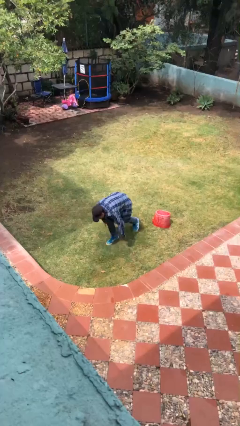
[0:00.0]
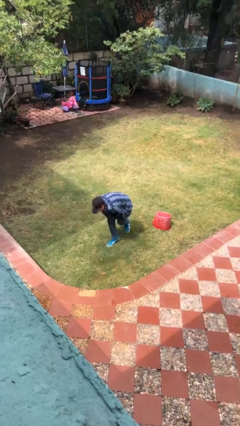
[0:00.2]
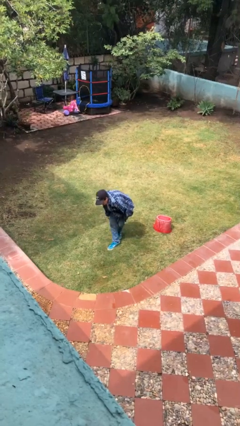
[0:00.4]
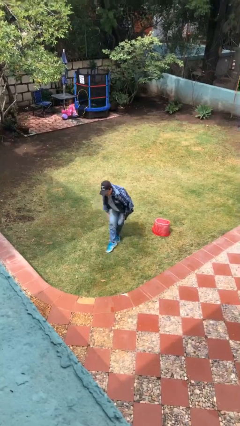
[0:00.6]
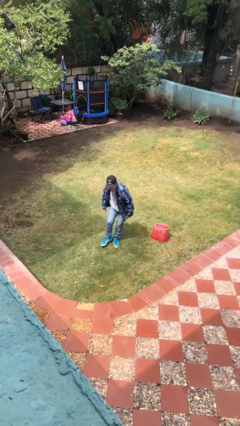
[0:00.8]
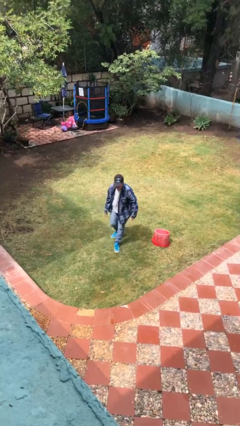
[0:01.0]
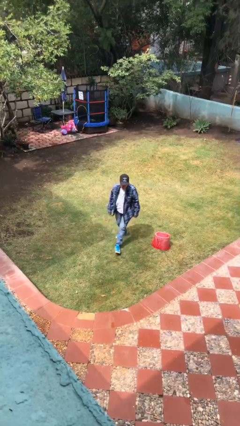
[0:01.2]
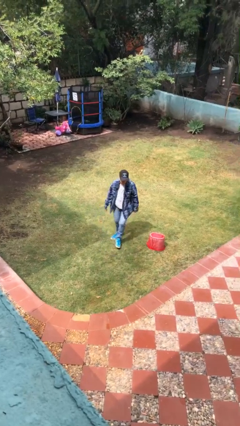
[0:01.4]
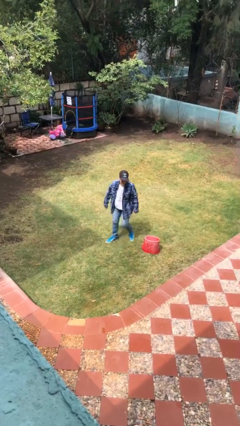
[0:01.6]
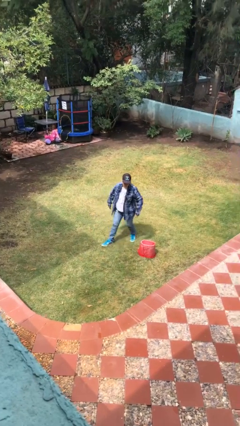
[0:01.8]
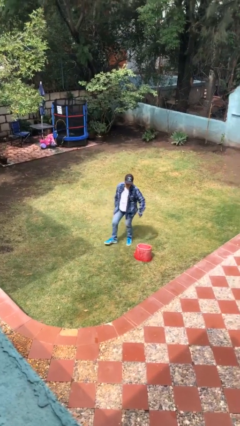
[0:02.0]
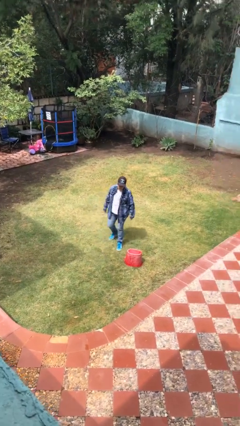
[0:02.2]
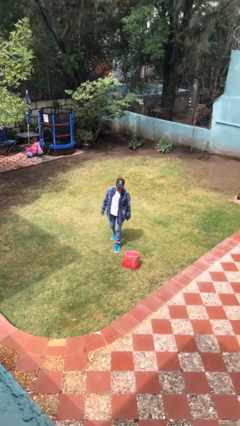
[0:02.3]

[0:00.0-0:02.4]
person stands up from floor

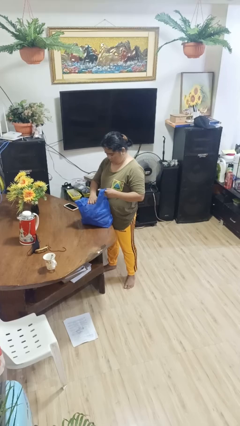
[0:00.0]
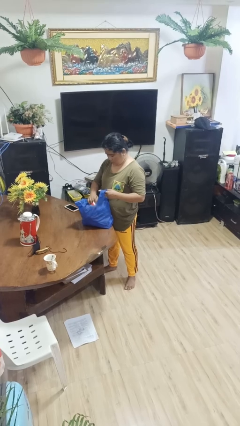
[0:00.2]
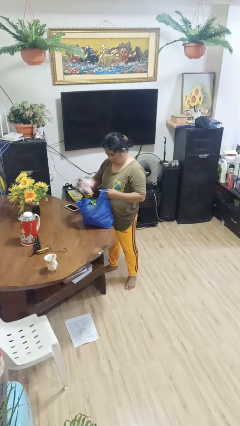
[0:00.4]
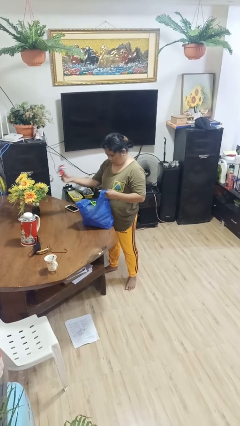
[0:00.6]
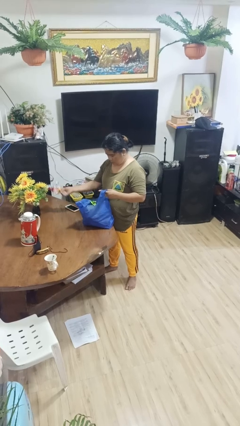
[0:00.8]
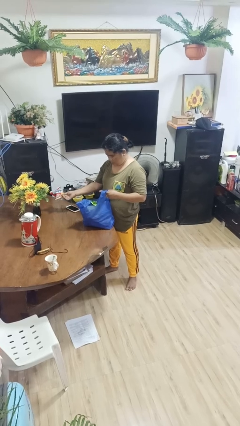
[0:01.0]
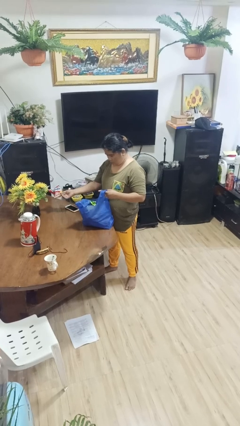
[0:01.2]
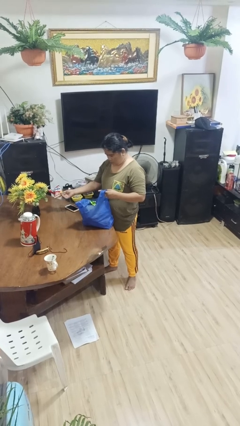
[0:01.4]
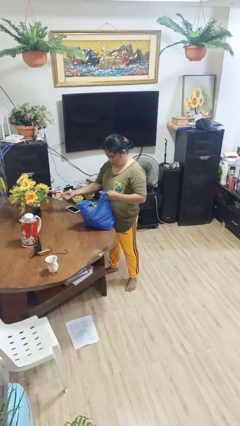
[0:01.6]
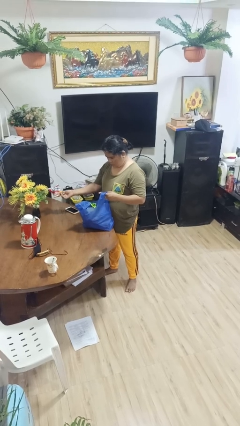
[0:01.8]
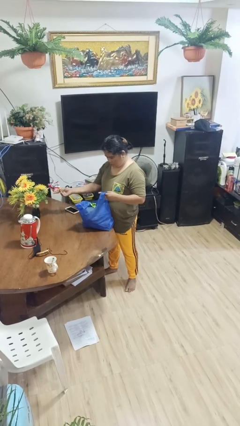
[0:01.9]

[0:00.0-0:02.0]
person takes object from bag

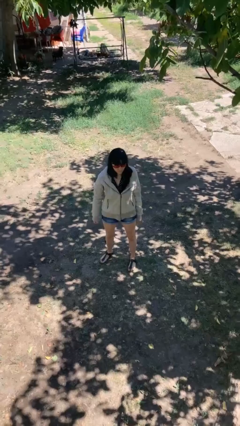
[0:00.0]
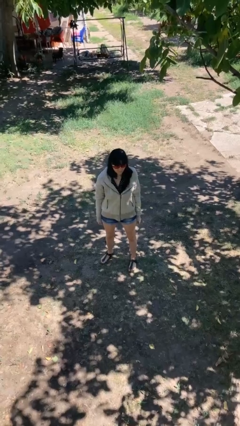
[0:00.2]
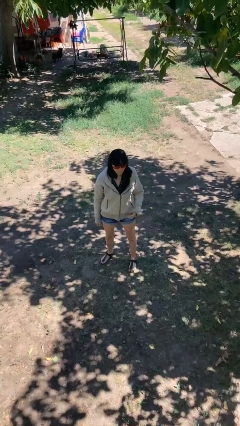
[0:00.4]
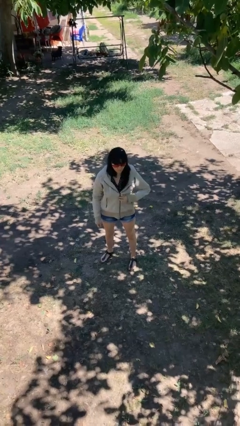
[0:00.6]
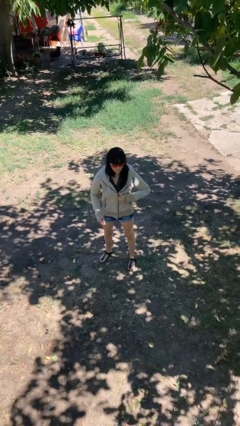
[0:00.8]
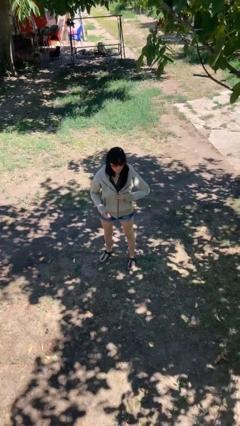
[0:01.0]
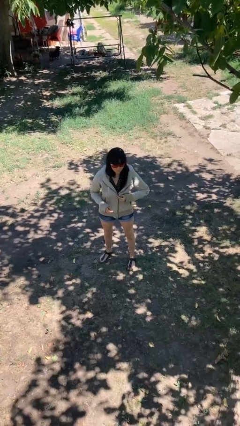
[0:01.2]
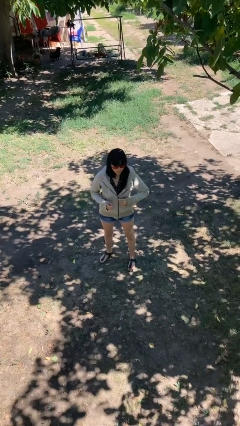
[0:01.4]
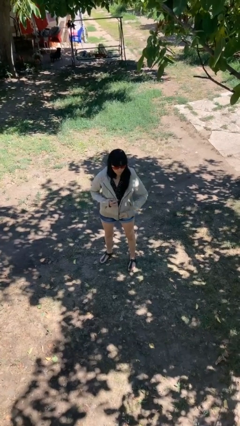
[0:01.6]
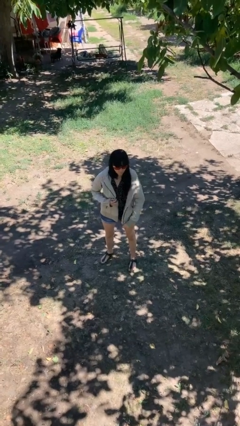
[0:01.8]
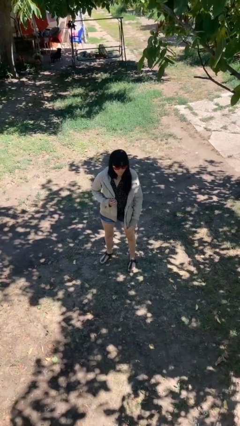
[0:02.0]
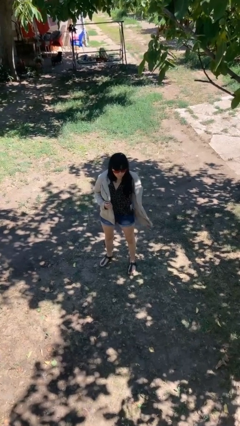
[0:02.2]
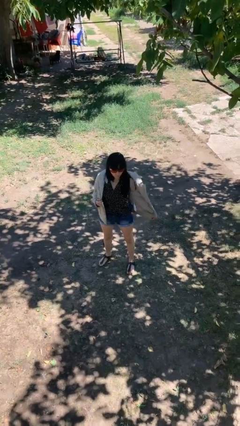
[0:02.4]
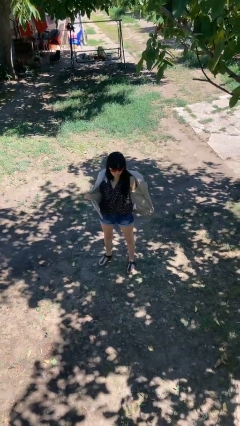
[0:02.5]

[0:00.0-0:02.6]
person unzips jacket

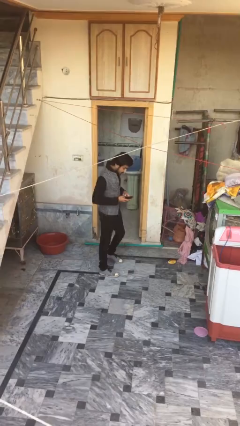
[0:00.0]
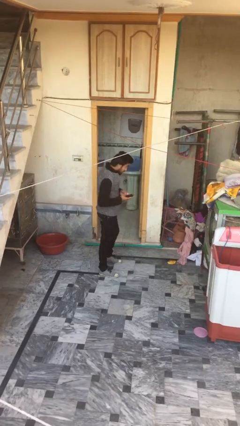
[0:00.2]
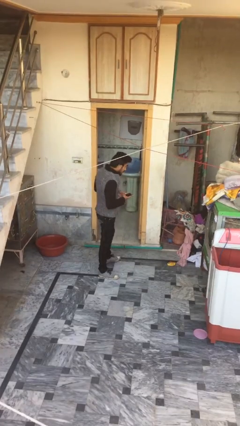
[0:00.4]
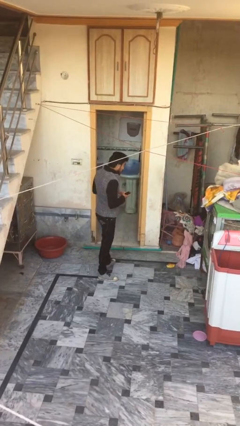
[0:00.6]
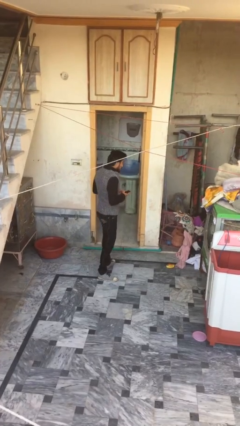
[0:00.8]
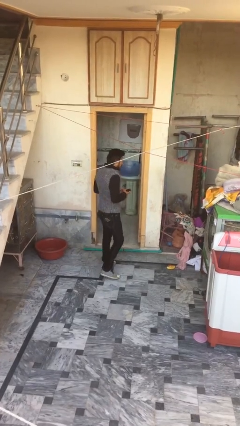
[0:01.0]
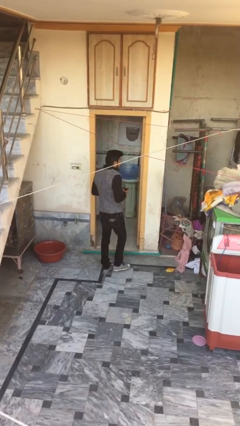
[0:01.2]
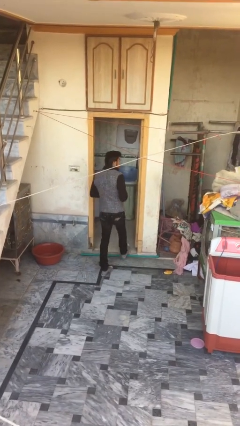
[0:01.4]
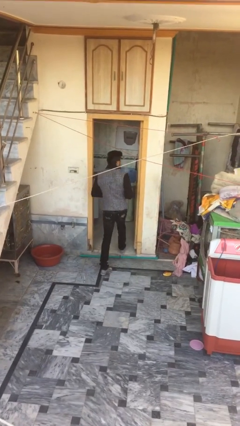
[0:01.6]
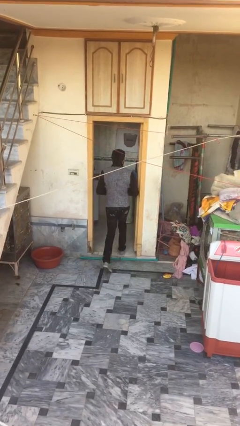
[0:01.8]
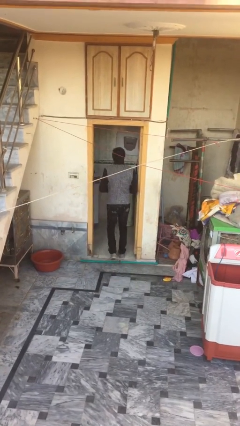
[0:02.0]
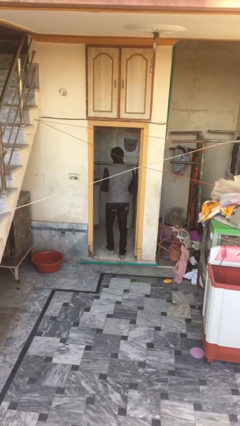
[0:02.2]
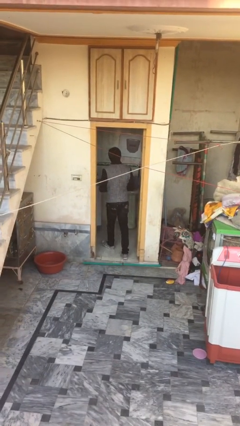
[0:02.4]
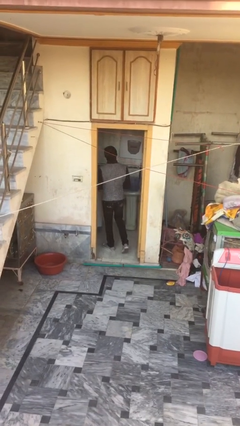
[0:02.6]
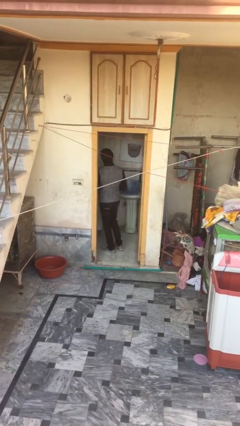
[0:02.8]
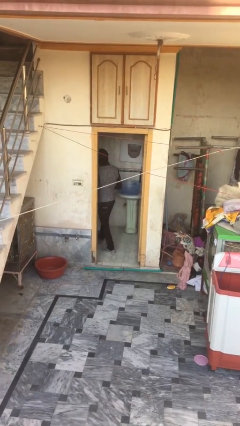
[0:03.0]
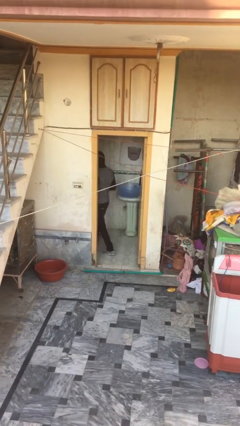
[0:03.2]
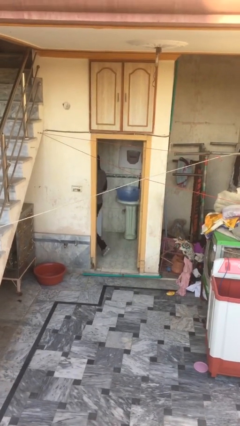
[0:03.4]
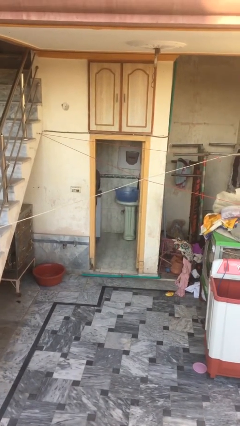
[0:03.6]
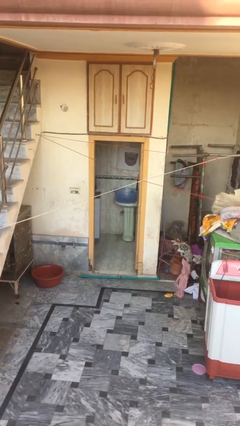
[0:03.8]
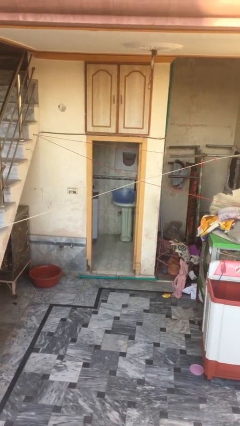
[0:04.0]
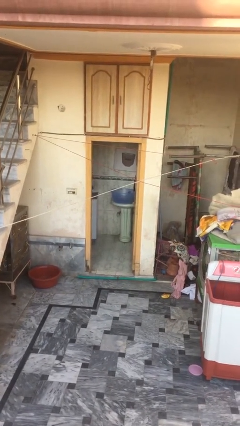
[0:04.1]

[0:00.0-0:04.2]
person exits scene through structure

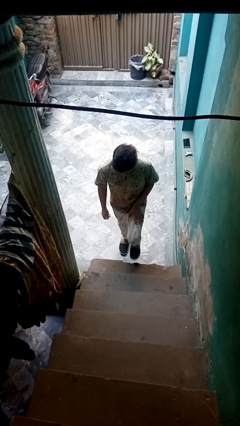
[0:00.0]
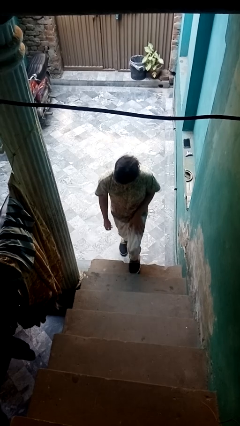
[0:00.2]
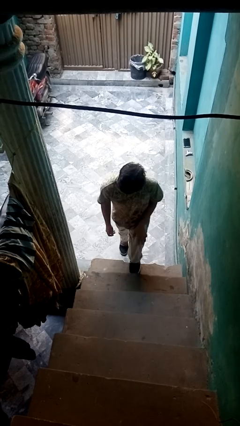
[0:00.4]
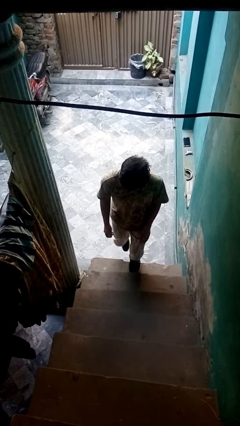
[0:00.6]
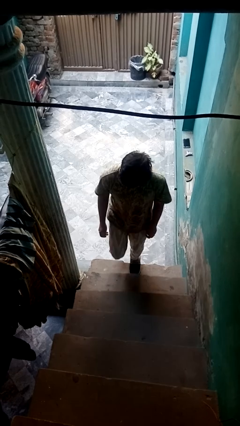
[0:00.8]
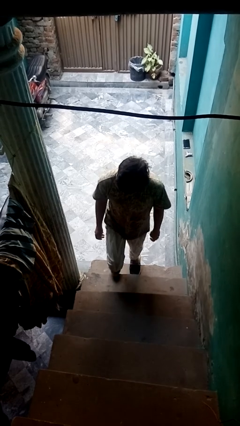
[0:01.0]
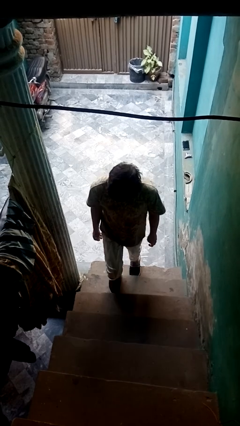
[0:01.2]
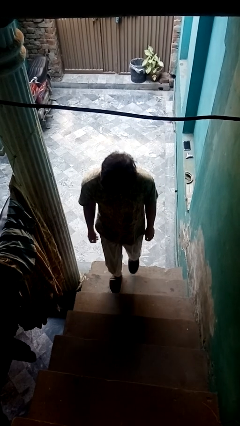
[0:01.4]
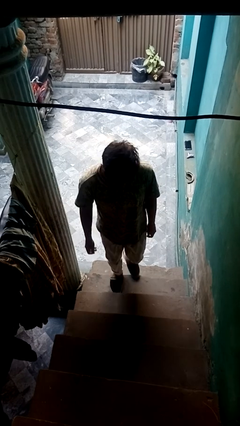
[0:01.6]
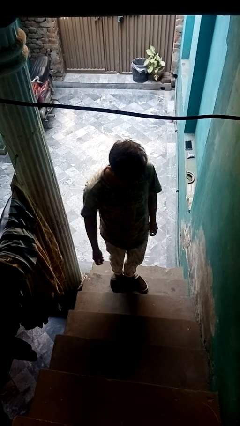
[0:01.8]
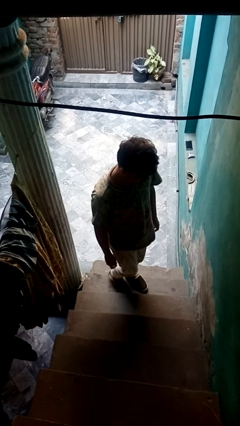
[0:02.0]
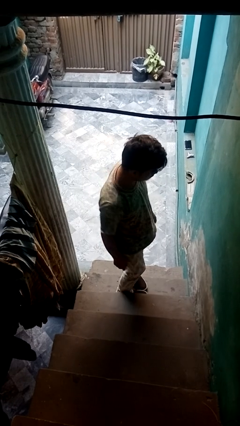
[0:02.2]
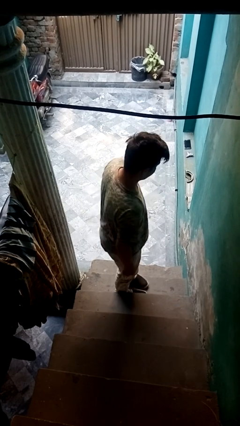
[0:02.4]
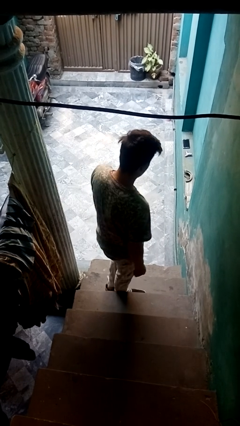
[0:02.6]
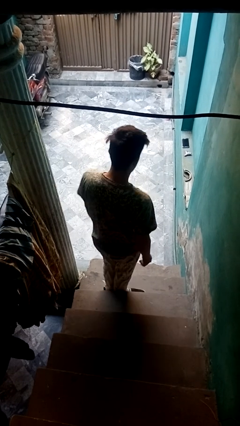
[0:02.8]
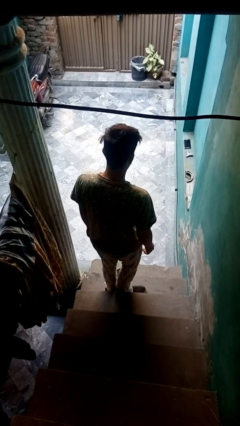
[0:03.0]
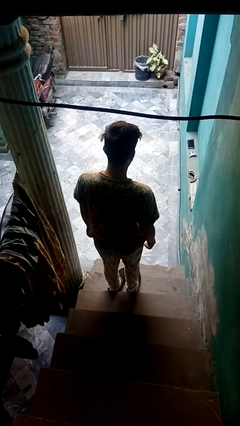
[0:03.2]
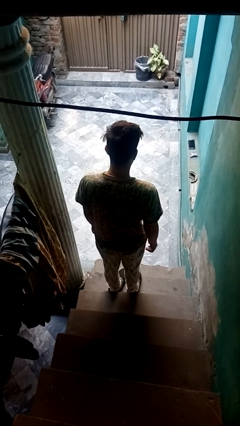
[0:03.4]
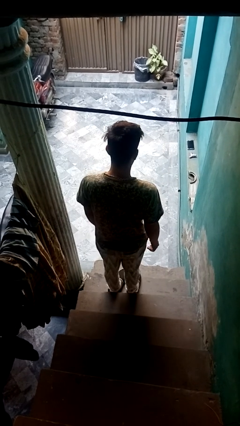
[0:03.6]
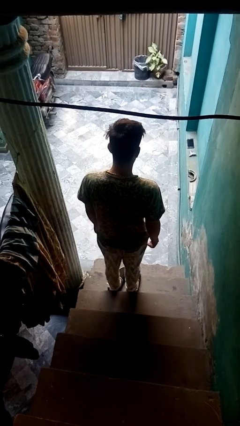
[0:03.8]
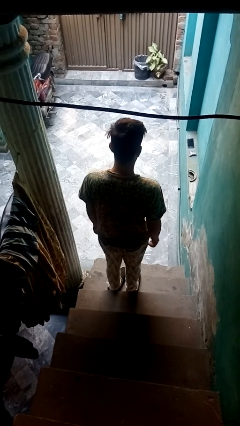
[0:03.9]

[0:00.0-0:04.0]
person climbs up stairs

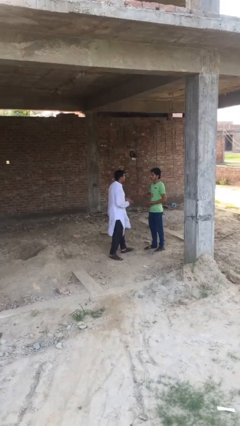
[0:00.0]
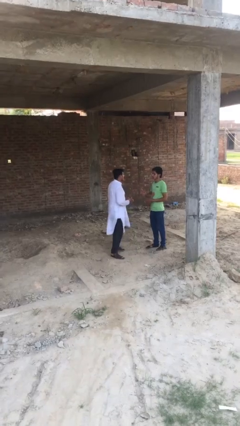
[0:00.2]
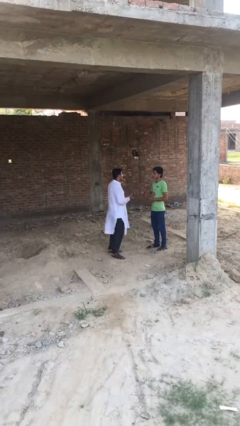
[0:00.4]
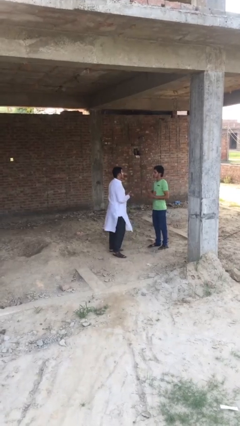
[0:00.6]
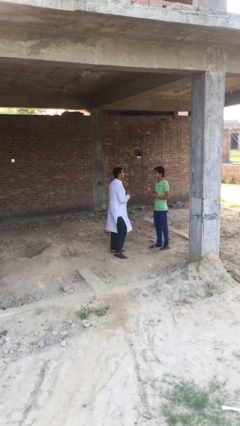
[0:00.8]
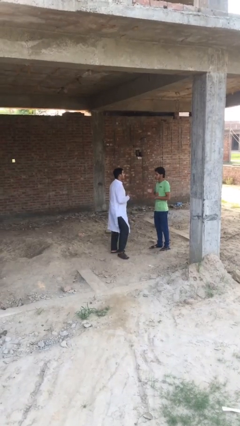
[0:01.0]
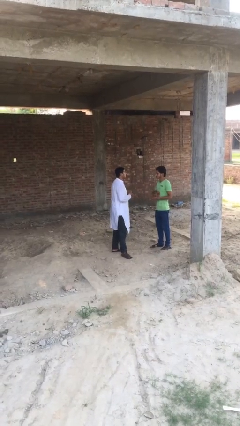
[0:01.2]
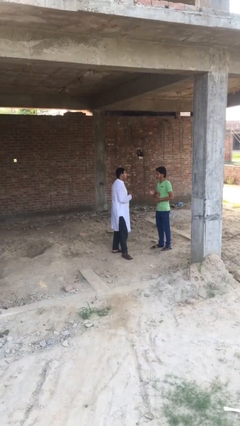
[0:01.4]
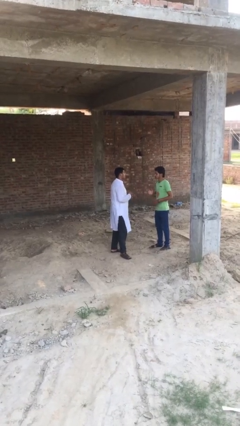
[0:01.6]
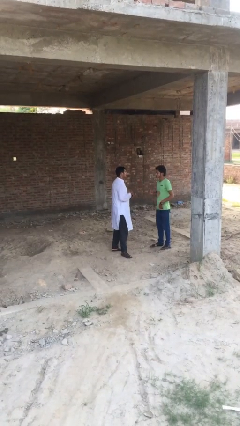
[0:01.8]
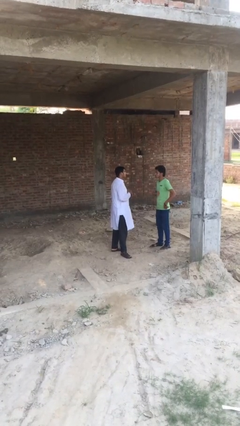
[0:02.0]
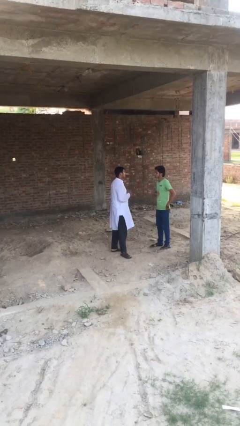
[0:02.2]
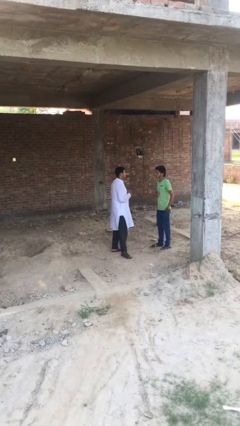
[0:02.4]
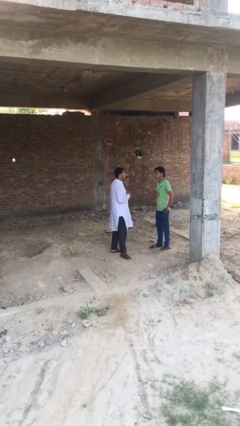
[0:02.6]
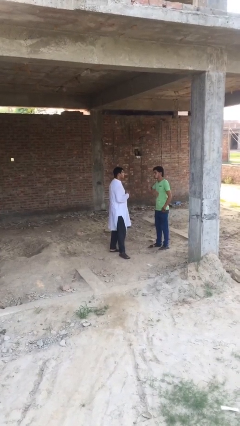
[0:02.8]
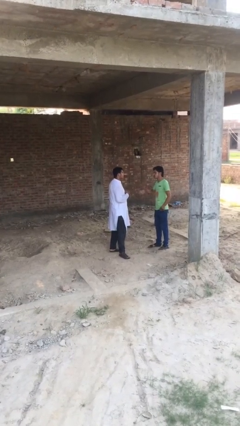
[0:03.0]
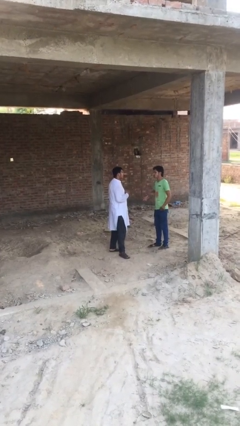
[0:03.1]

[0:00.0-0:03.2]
person talks to person
